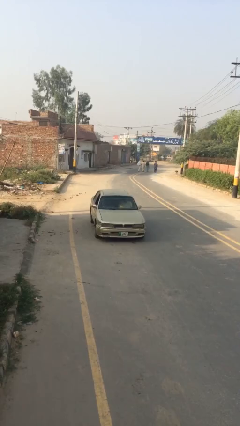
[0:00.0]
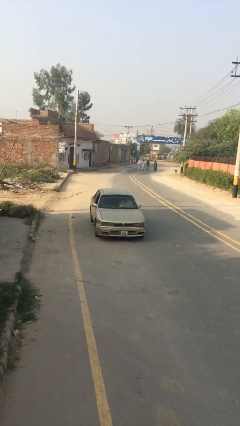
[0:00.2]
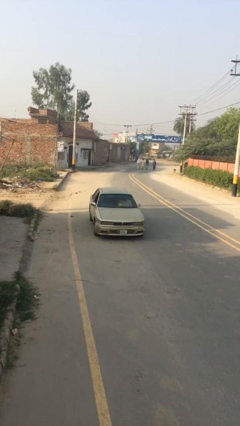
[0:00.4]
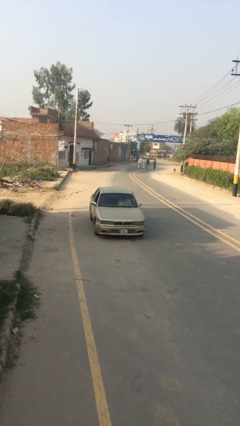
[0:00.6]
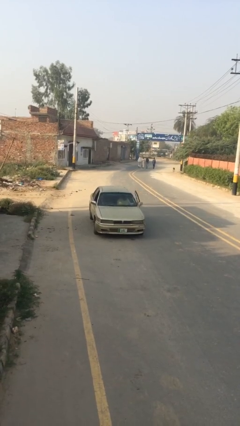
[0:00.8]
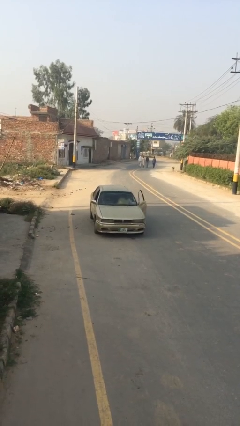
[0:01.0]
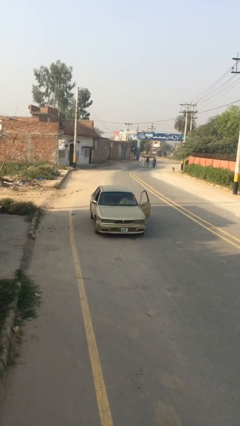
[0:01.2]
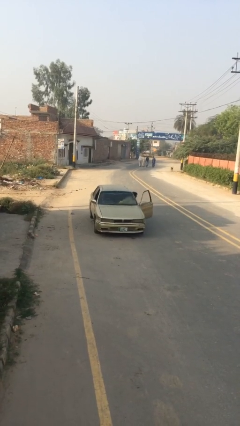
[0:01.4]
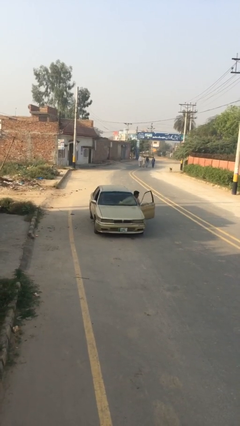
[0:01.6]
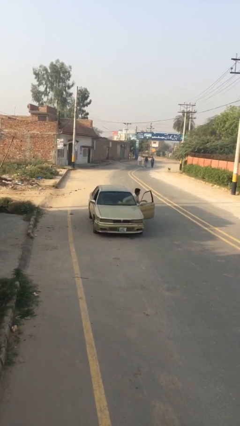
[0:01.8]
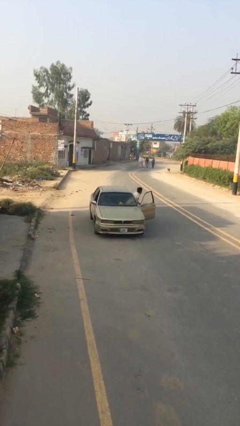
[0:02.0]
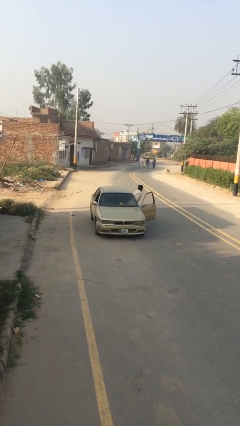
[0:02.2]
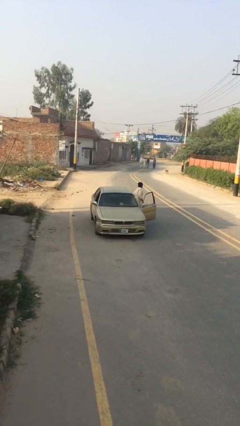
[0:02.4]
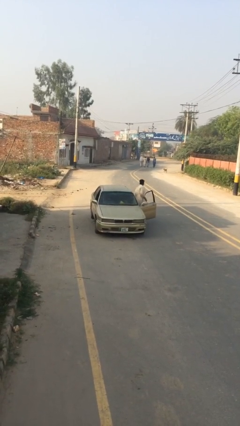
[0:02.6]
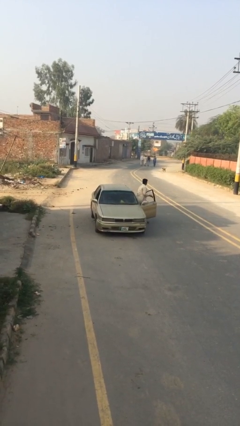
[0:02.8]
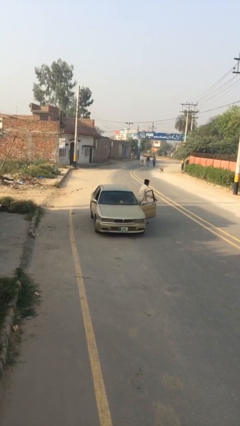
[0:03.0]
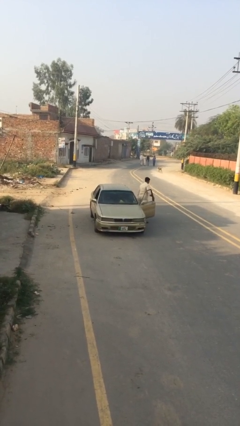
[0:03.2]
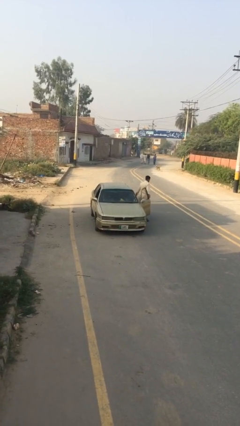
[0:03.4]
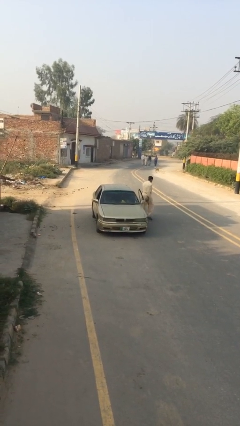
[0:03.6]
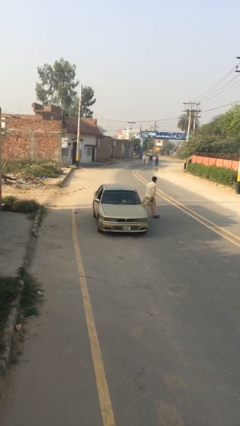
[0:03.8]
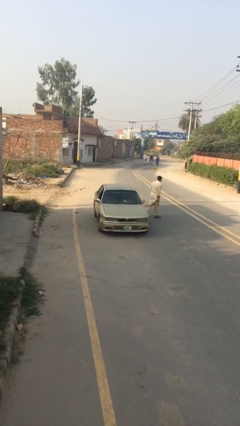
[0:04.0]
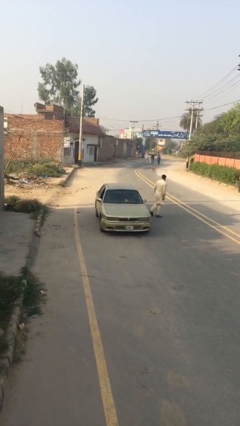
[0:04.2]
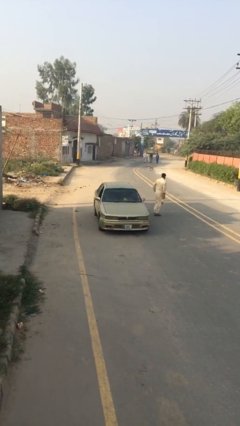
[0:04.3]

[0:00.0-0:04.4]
car drops off person

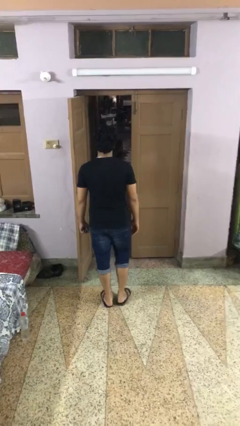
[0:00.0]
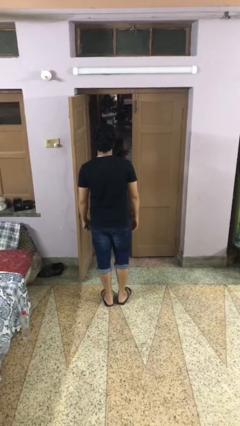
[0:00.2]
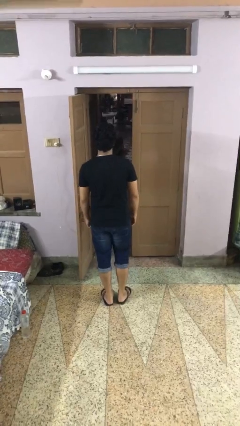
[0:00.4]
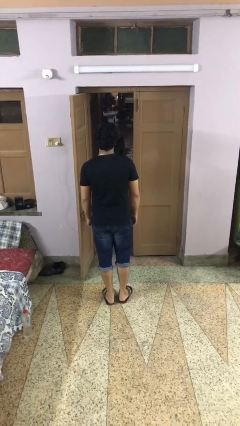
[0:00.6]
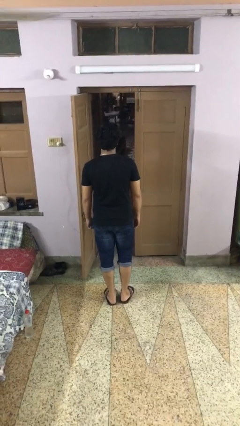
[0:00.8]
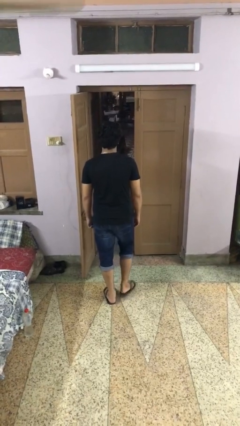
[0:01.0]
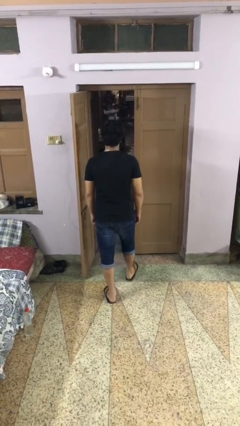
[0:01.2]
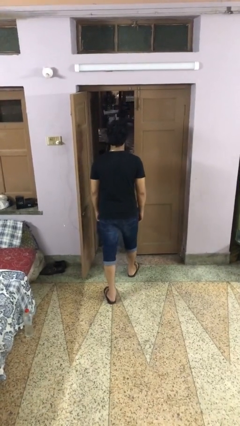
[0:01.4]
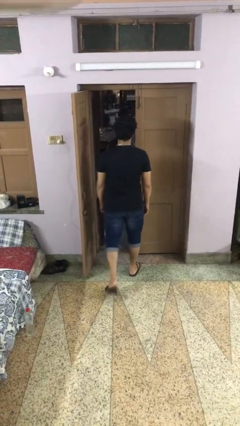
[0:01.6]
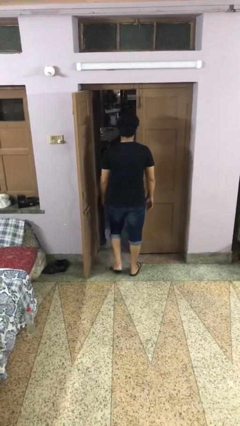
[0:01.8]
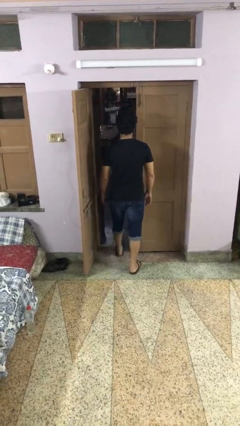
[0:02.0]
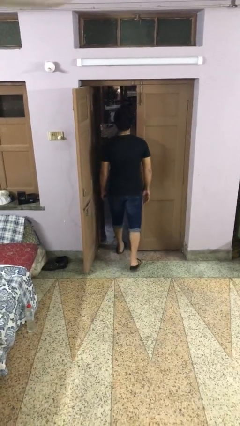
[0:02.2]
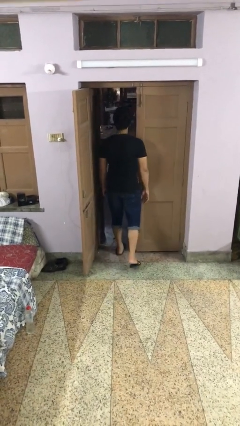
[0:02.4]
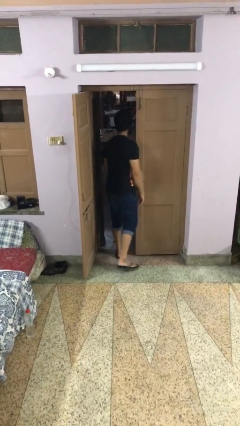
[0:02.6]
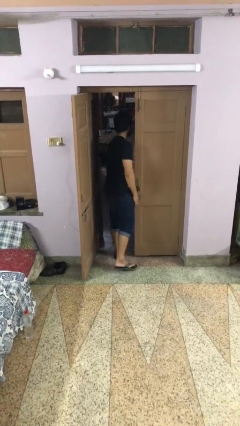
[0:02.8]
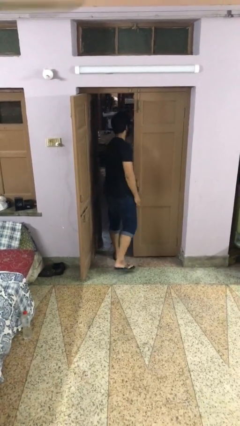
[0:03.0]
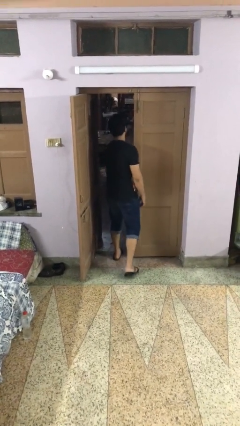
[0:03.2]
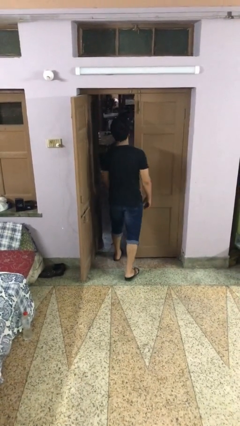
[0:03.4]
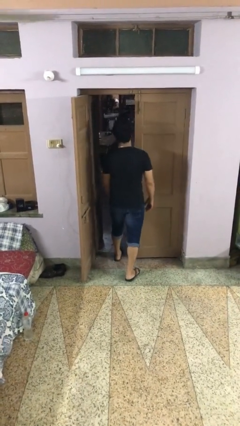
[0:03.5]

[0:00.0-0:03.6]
person bumps into wall

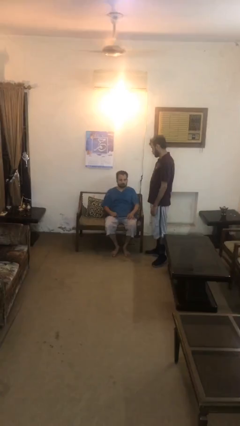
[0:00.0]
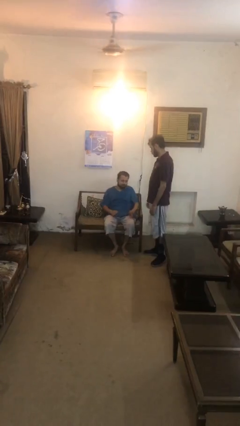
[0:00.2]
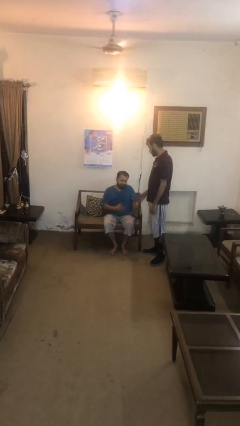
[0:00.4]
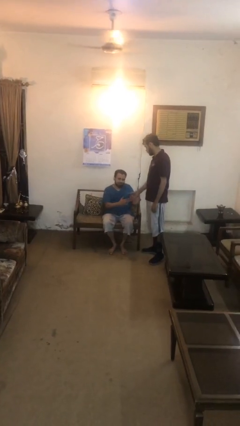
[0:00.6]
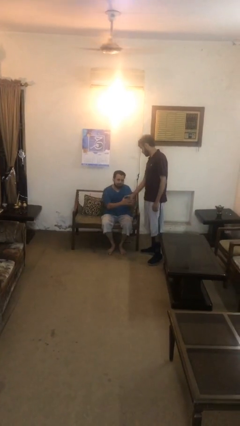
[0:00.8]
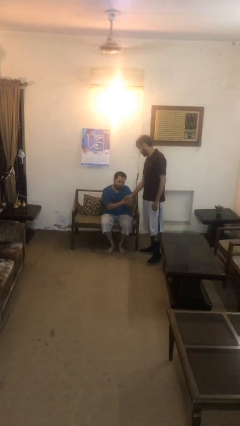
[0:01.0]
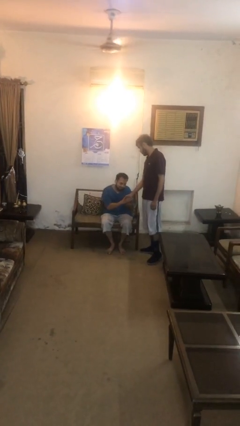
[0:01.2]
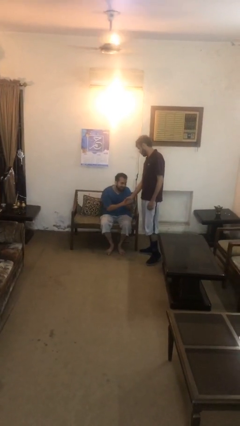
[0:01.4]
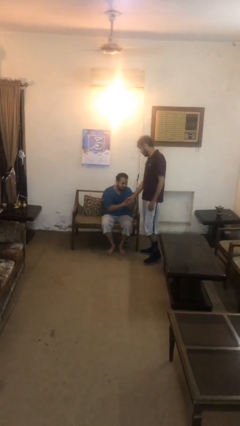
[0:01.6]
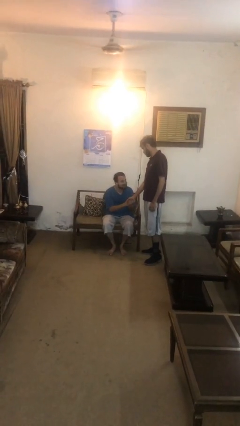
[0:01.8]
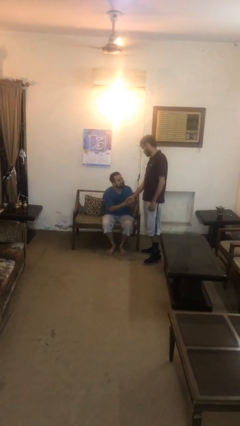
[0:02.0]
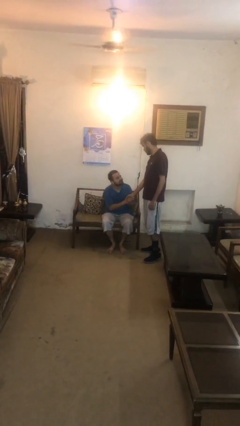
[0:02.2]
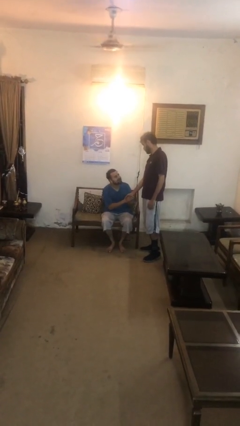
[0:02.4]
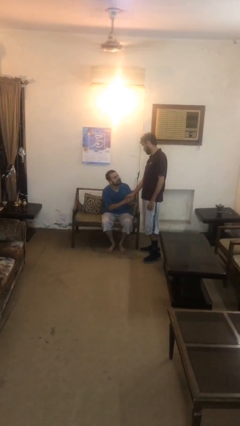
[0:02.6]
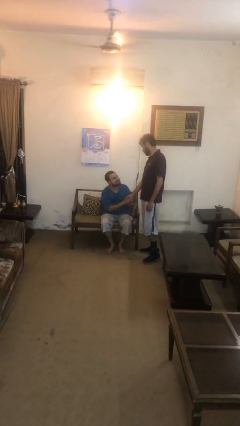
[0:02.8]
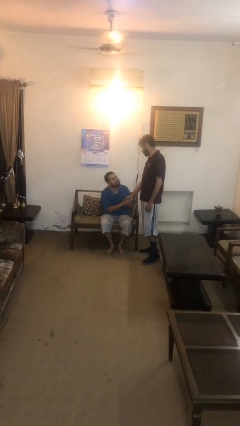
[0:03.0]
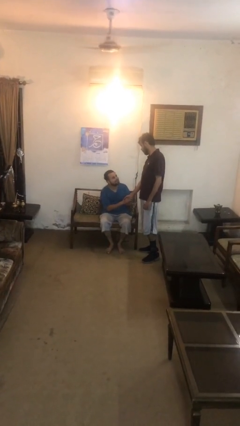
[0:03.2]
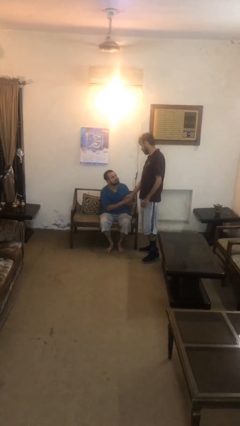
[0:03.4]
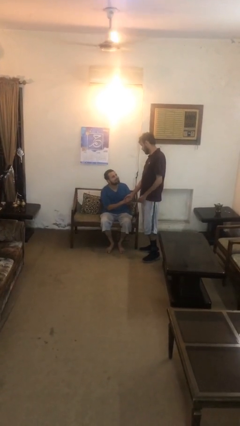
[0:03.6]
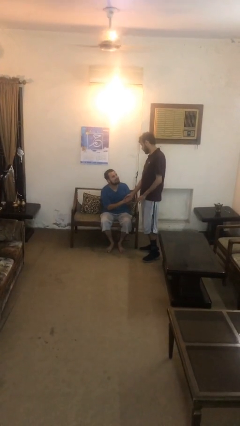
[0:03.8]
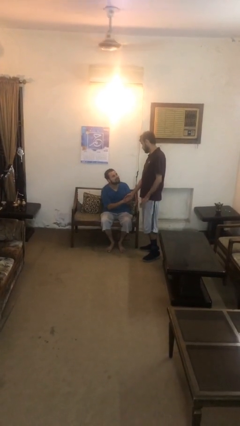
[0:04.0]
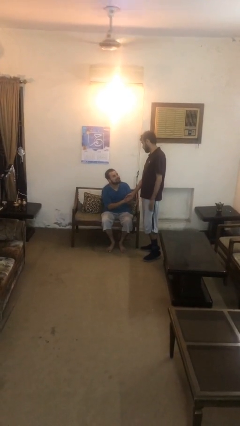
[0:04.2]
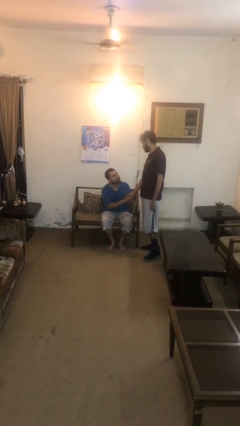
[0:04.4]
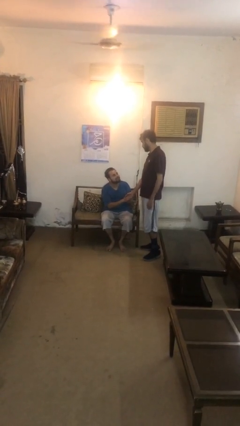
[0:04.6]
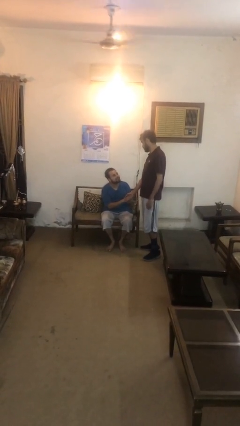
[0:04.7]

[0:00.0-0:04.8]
person shakes hand

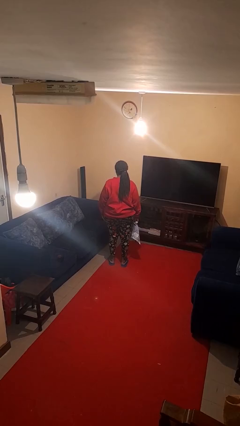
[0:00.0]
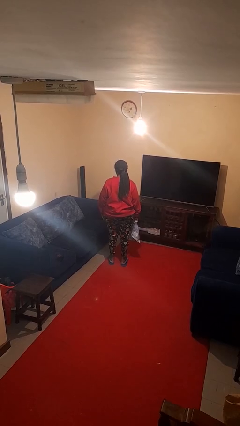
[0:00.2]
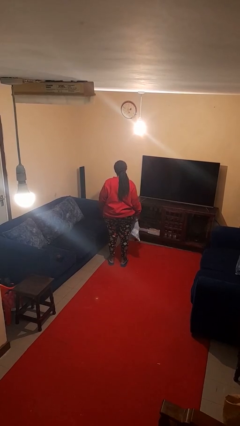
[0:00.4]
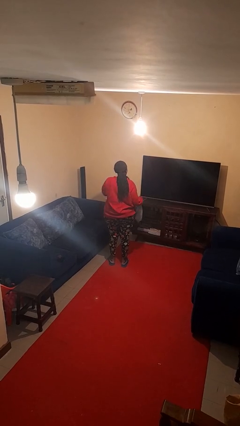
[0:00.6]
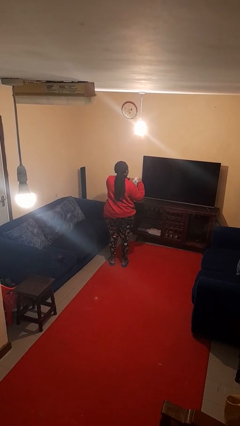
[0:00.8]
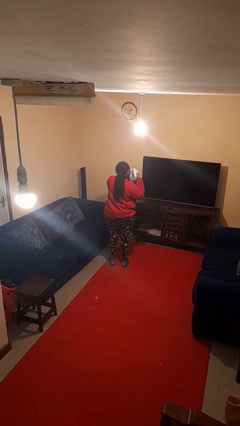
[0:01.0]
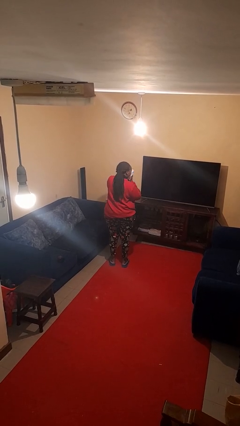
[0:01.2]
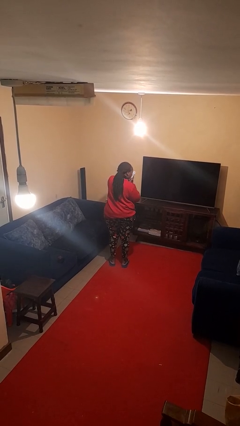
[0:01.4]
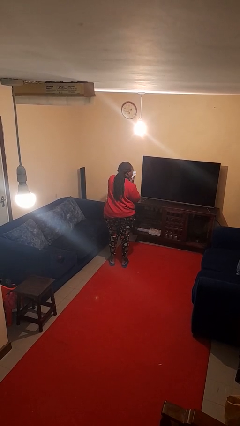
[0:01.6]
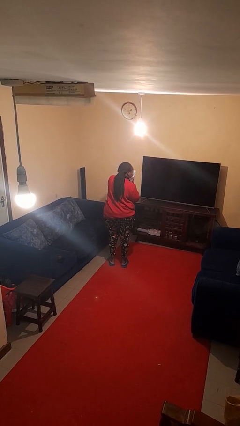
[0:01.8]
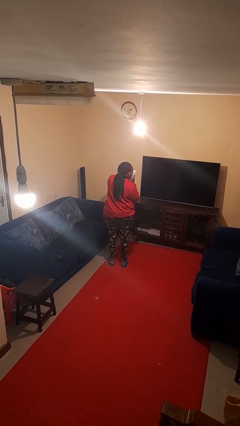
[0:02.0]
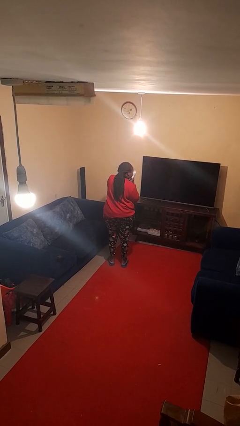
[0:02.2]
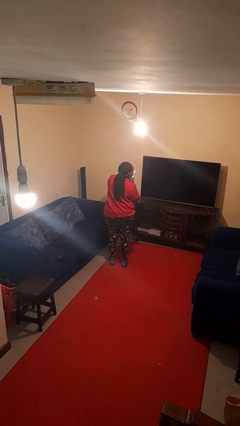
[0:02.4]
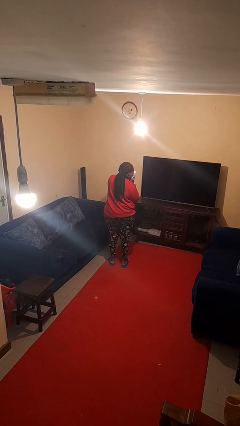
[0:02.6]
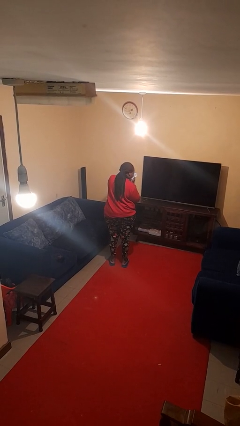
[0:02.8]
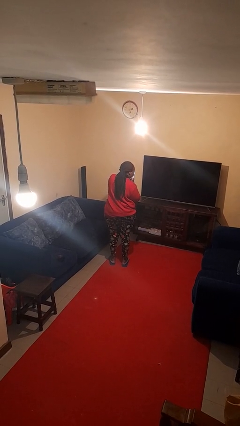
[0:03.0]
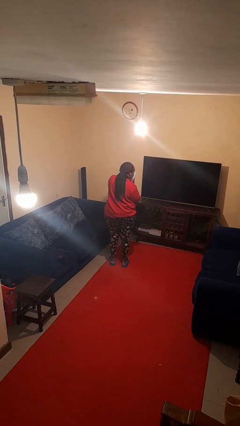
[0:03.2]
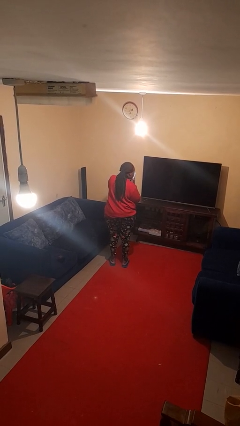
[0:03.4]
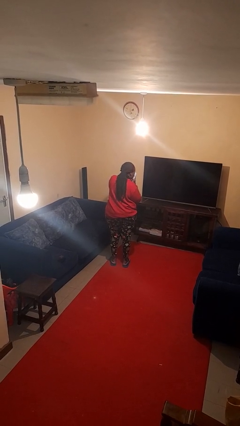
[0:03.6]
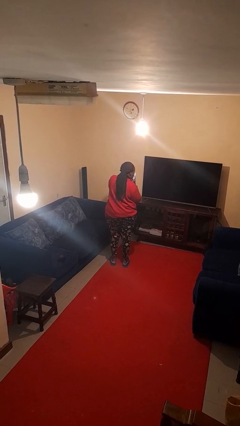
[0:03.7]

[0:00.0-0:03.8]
person blows nose

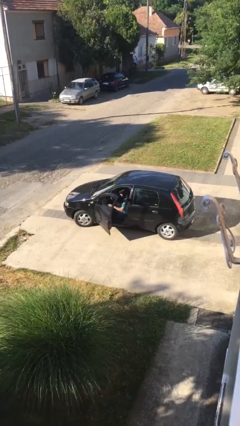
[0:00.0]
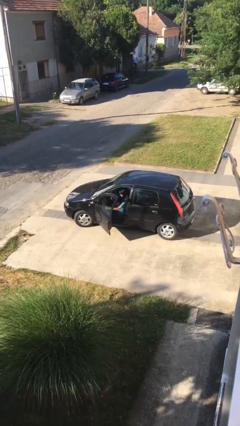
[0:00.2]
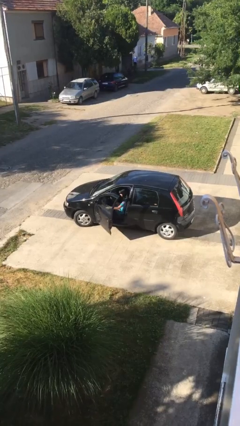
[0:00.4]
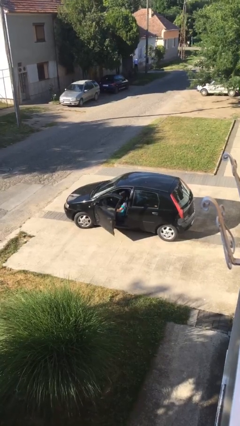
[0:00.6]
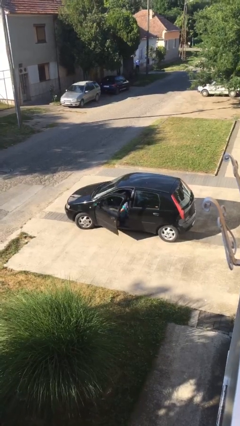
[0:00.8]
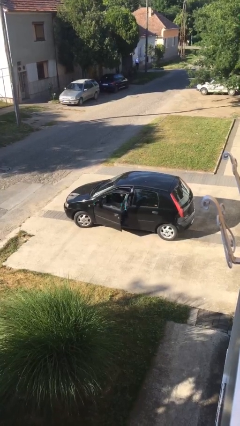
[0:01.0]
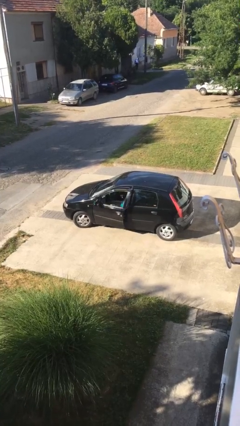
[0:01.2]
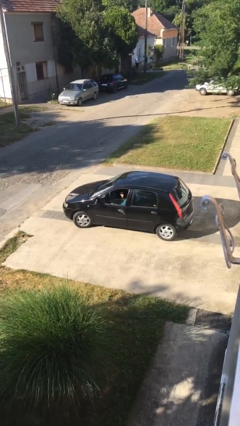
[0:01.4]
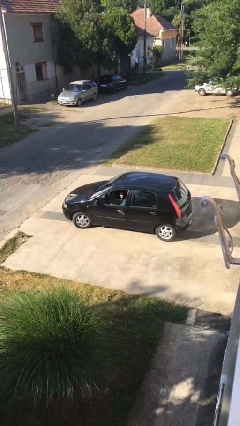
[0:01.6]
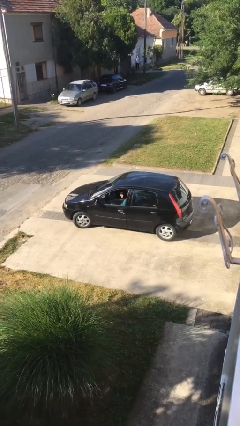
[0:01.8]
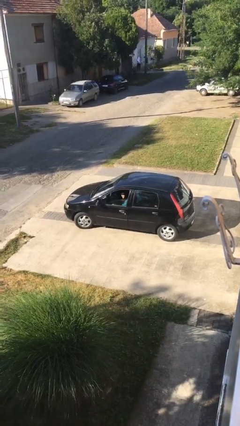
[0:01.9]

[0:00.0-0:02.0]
person closes car door
